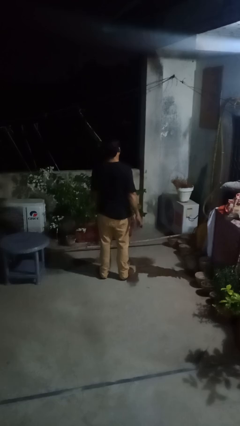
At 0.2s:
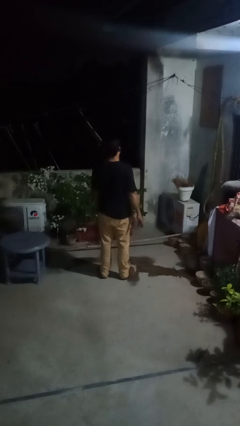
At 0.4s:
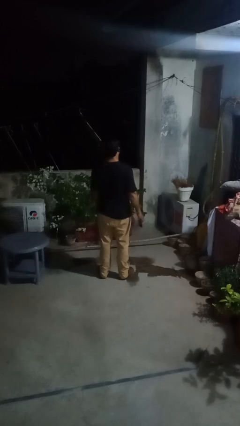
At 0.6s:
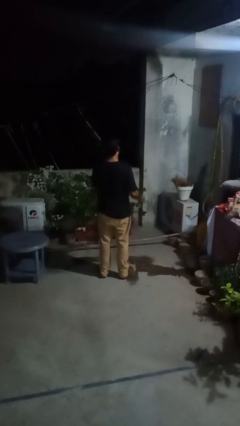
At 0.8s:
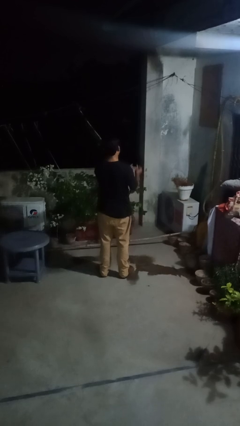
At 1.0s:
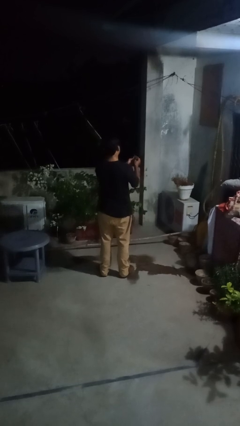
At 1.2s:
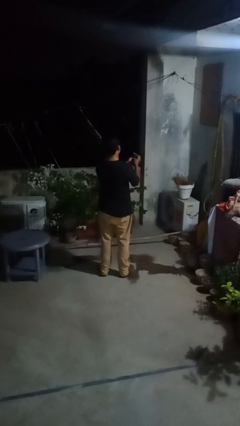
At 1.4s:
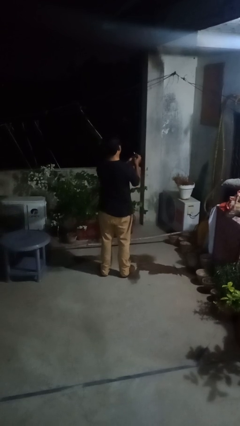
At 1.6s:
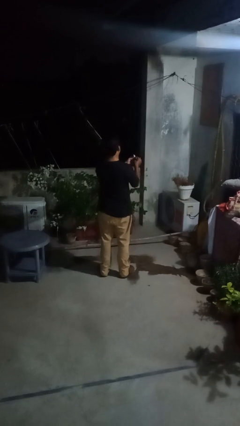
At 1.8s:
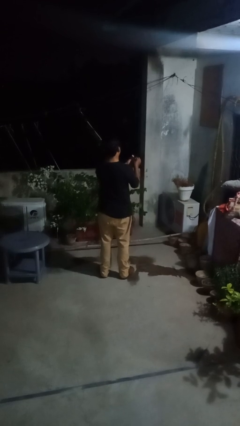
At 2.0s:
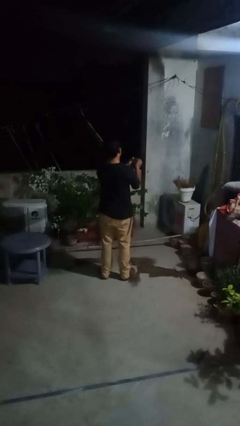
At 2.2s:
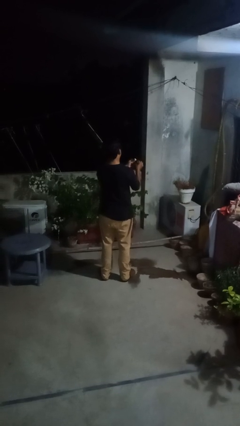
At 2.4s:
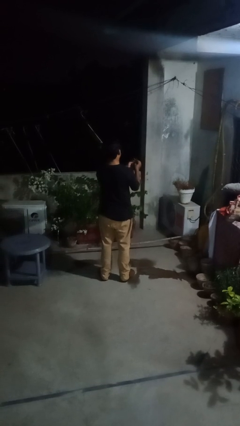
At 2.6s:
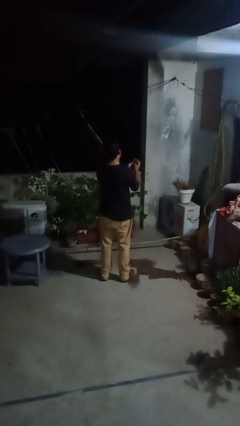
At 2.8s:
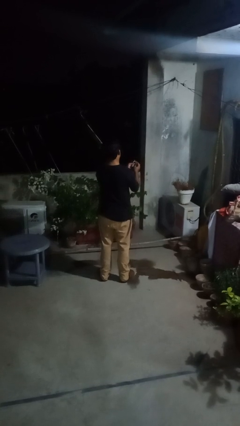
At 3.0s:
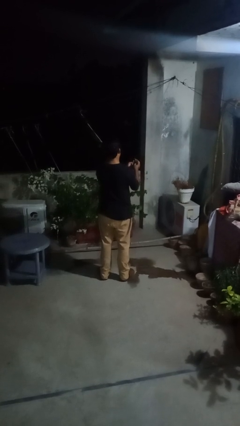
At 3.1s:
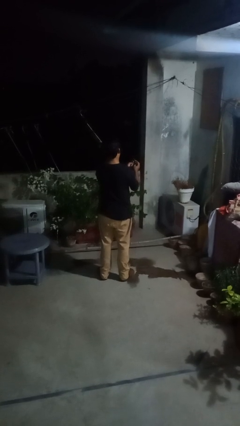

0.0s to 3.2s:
person files fingernails

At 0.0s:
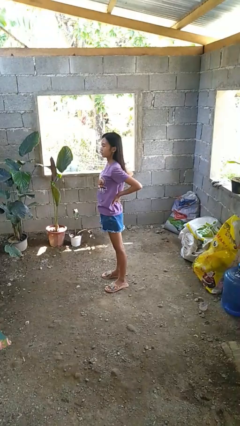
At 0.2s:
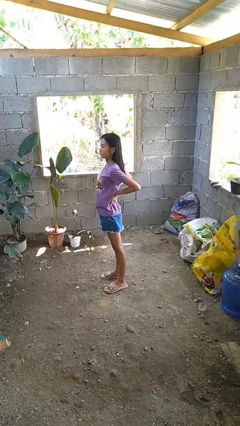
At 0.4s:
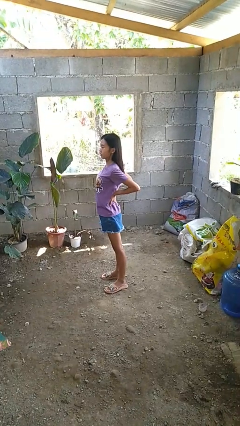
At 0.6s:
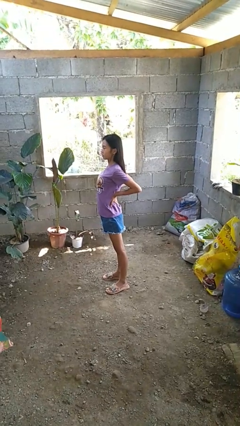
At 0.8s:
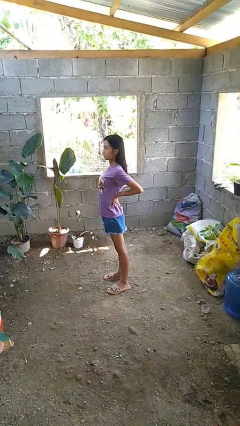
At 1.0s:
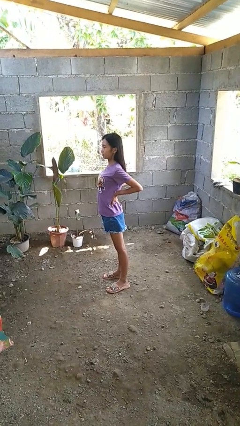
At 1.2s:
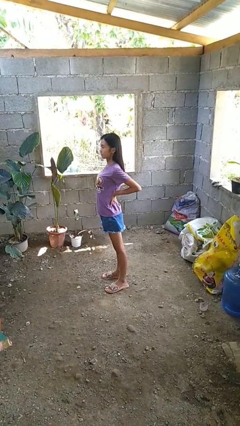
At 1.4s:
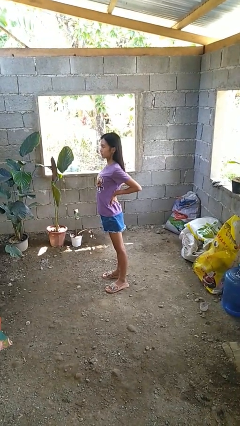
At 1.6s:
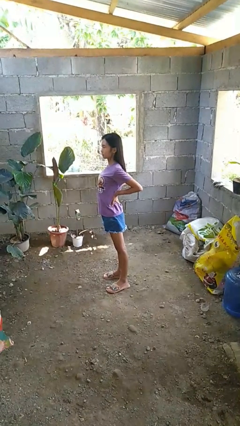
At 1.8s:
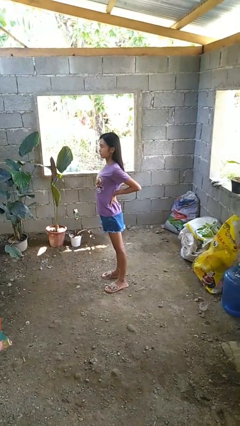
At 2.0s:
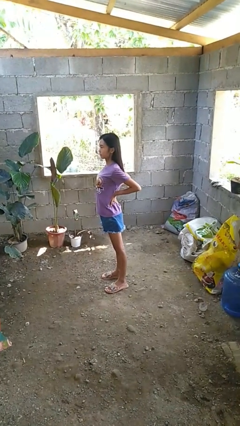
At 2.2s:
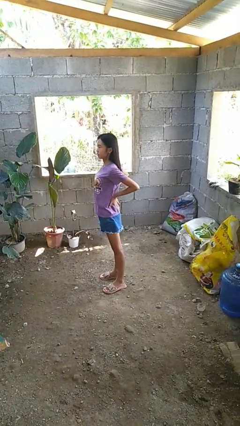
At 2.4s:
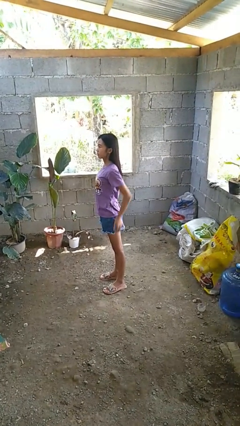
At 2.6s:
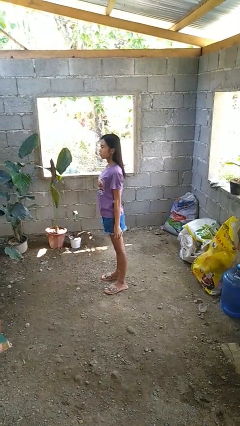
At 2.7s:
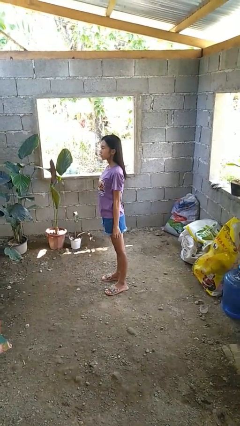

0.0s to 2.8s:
person stretches back

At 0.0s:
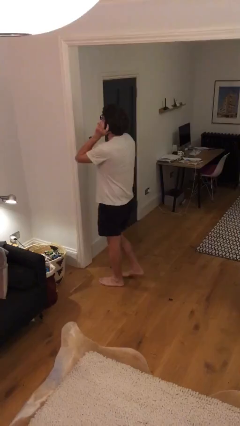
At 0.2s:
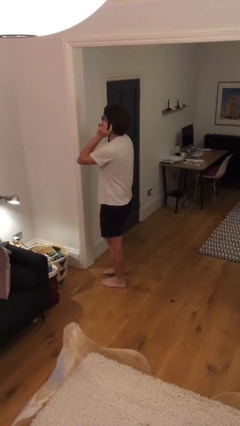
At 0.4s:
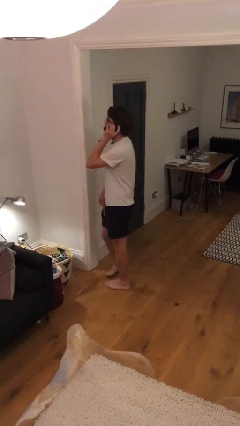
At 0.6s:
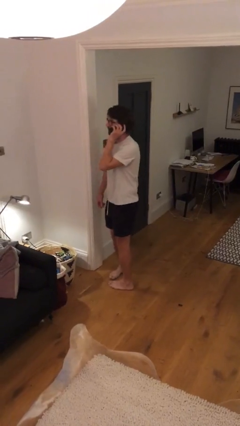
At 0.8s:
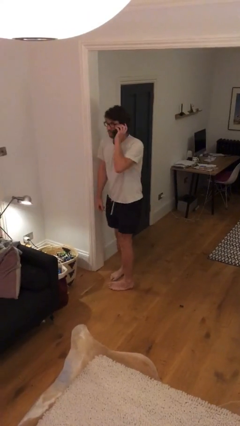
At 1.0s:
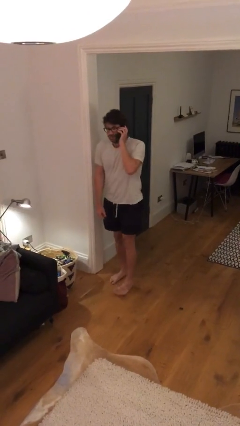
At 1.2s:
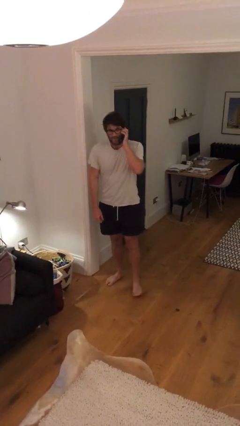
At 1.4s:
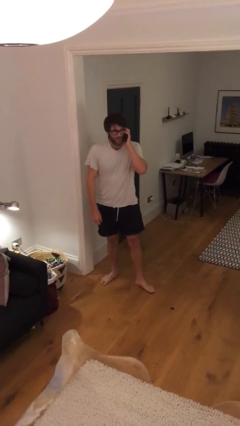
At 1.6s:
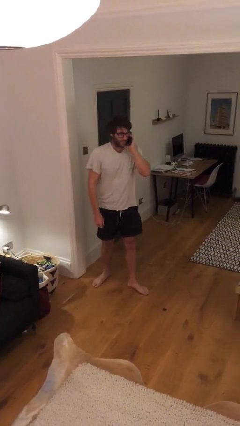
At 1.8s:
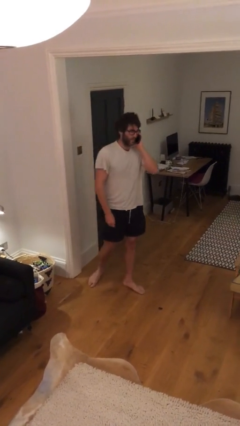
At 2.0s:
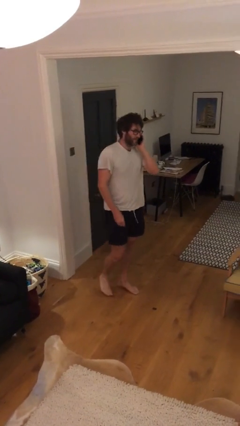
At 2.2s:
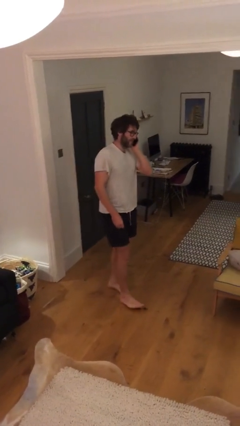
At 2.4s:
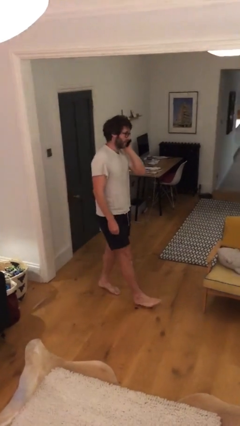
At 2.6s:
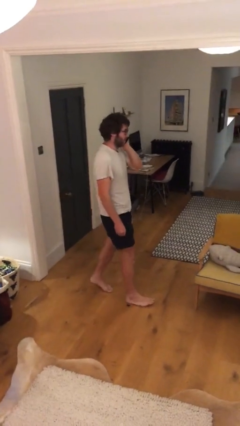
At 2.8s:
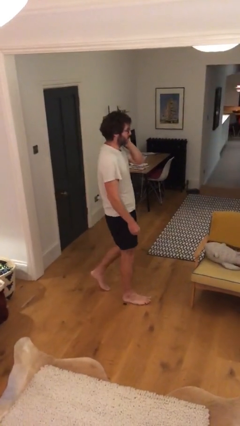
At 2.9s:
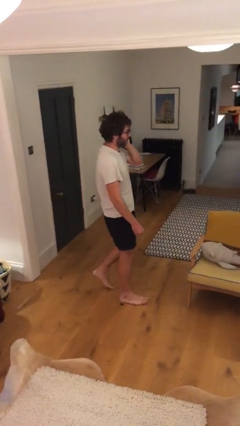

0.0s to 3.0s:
person talks on phone

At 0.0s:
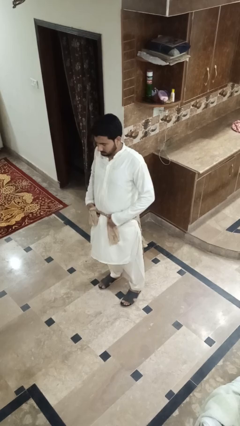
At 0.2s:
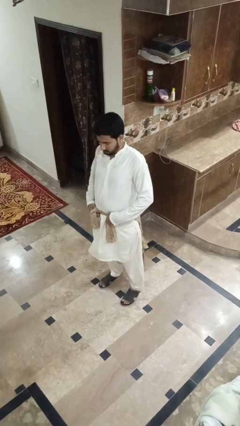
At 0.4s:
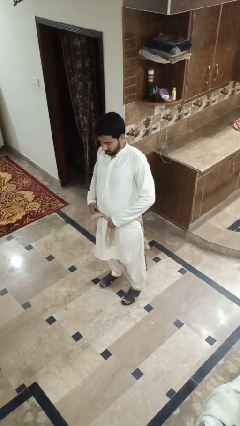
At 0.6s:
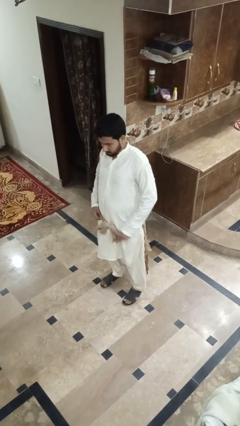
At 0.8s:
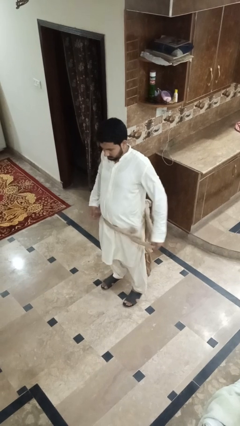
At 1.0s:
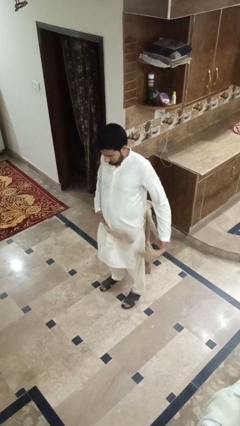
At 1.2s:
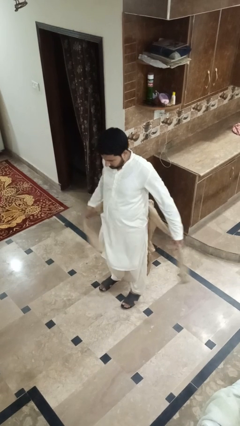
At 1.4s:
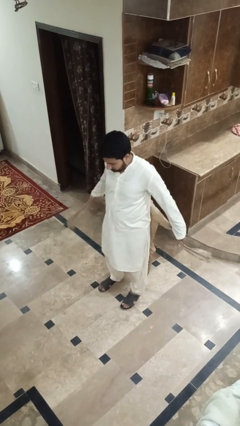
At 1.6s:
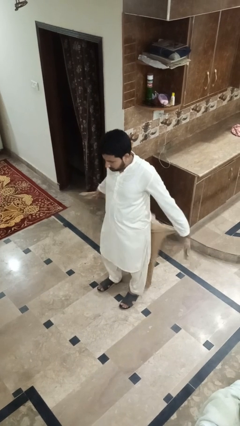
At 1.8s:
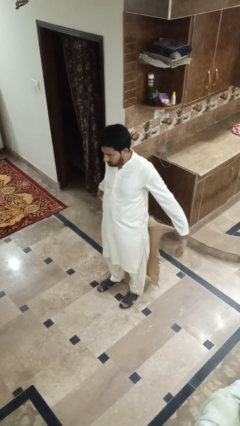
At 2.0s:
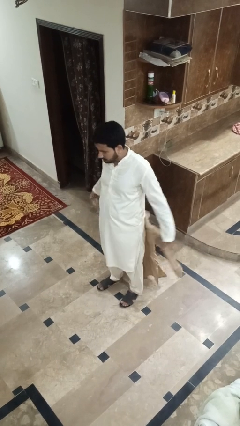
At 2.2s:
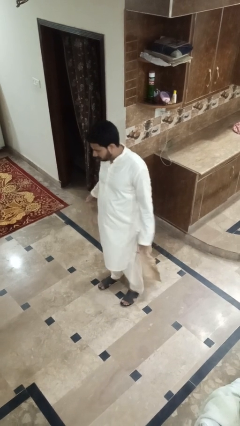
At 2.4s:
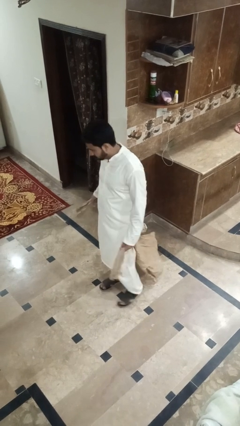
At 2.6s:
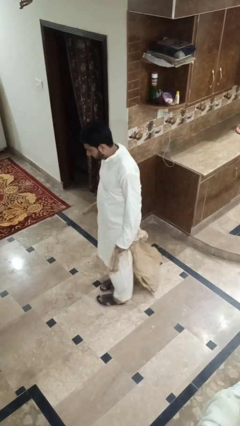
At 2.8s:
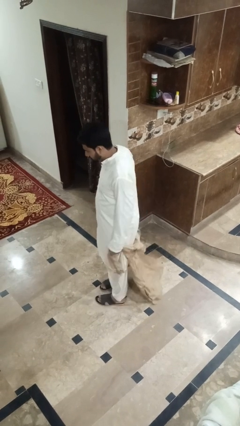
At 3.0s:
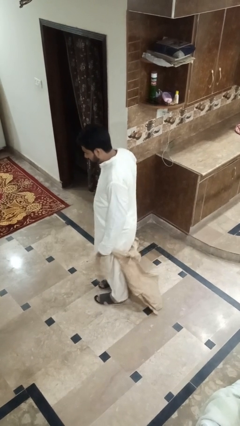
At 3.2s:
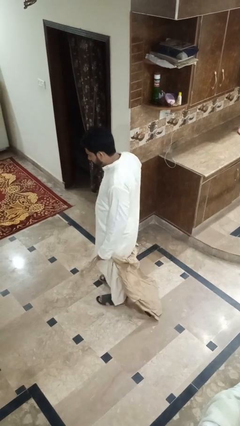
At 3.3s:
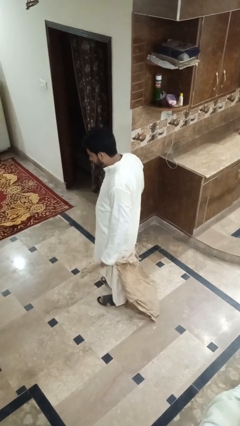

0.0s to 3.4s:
person unties jacket around waist

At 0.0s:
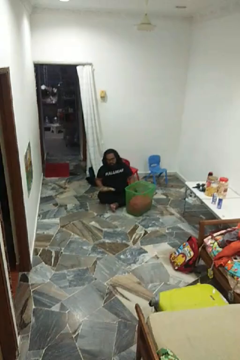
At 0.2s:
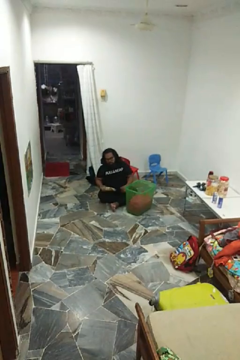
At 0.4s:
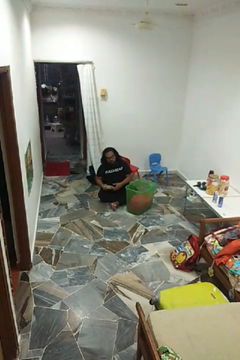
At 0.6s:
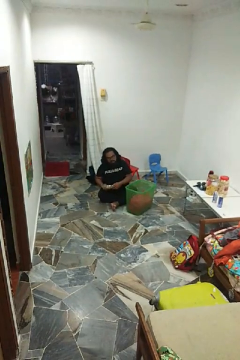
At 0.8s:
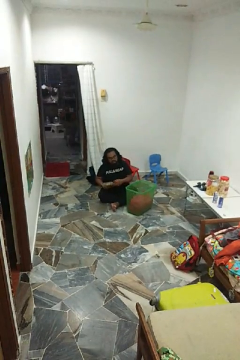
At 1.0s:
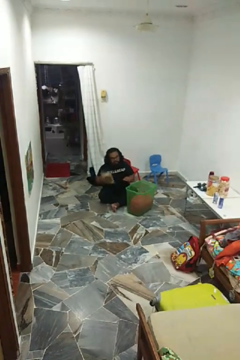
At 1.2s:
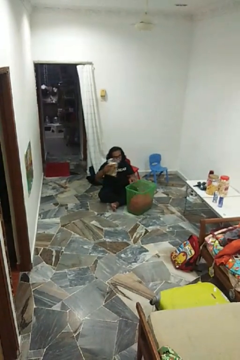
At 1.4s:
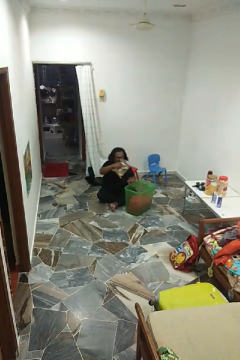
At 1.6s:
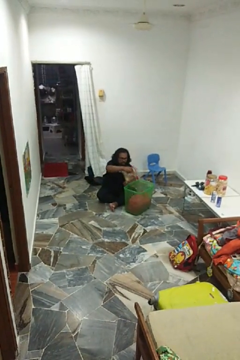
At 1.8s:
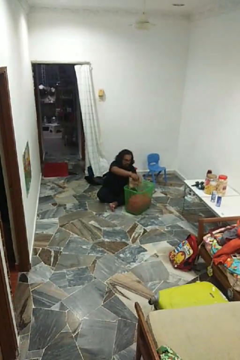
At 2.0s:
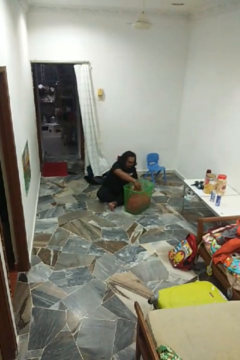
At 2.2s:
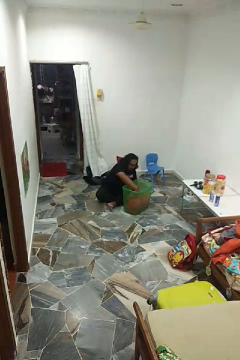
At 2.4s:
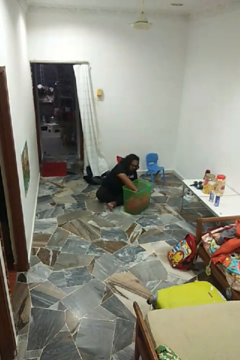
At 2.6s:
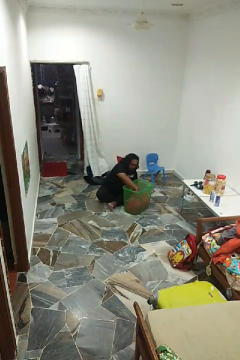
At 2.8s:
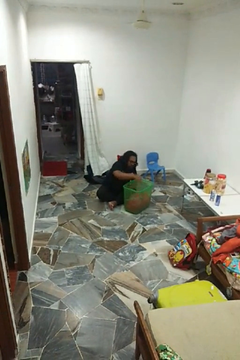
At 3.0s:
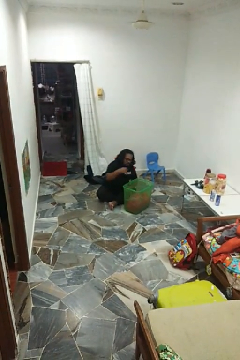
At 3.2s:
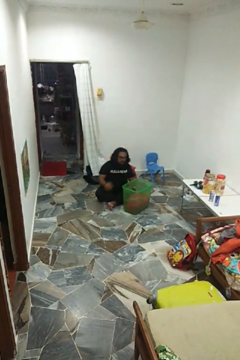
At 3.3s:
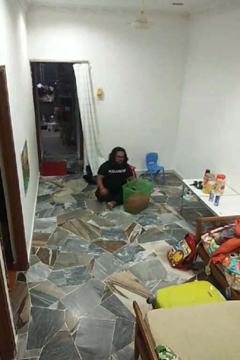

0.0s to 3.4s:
person puts object into basket

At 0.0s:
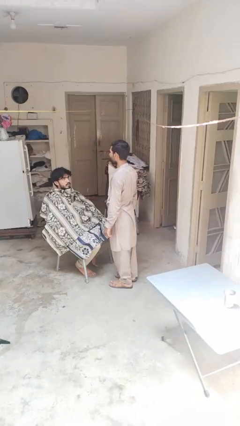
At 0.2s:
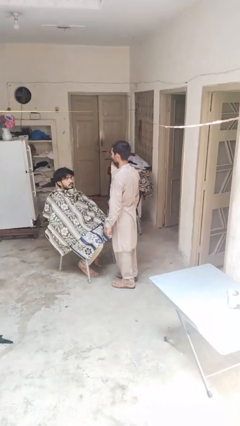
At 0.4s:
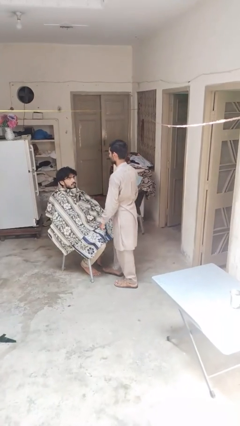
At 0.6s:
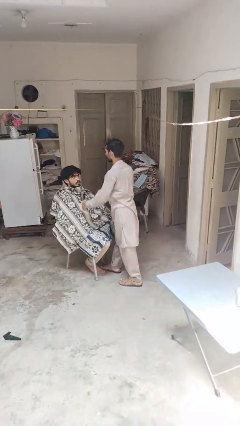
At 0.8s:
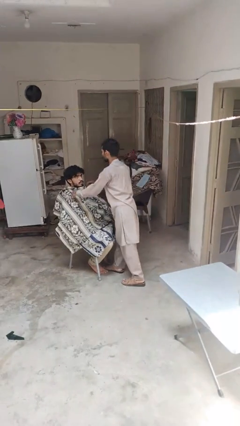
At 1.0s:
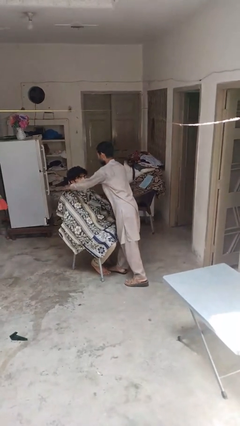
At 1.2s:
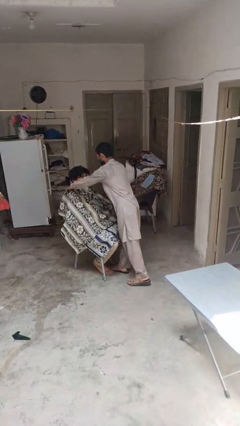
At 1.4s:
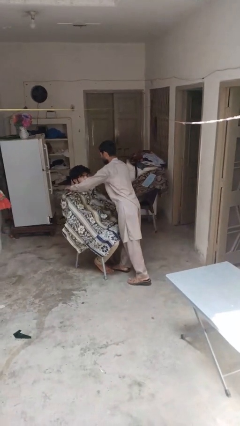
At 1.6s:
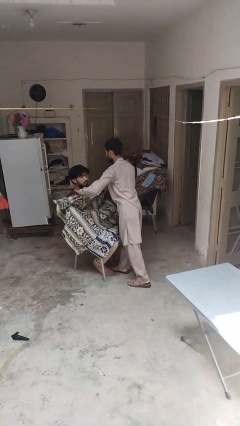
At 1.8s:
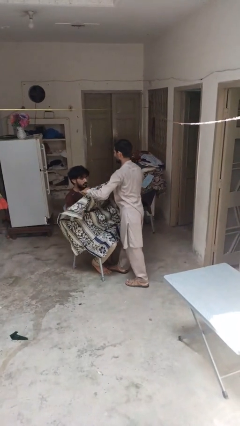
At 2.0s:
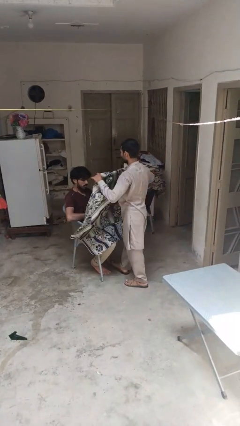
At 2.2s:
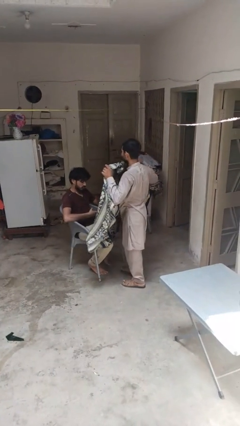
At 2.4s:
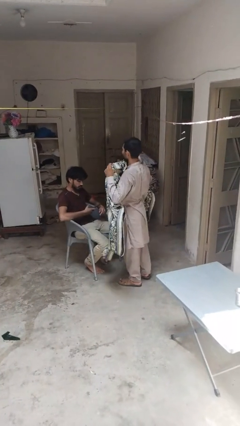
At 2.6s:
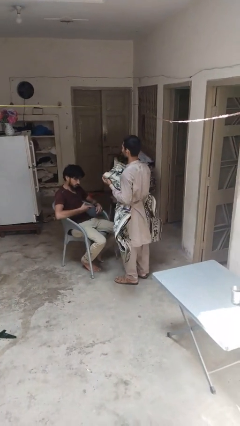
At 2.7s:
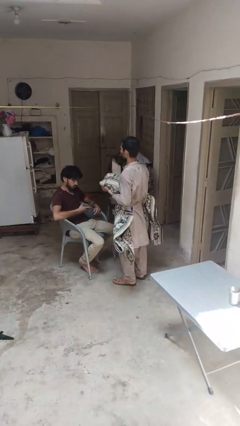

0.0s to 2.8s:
person uncovers friend with blanket
